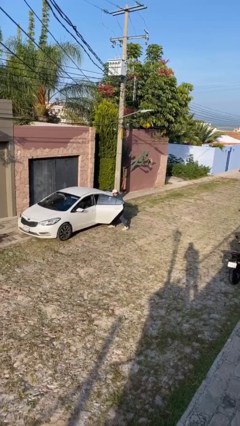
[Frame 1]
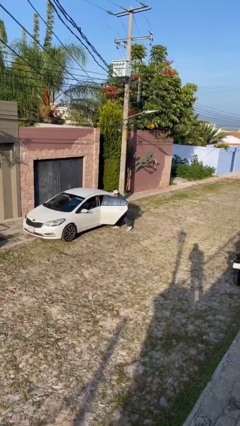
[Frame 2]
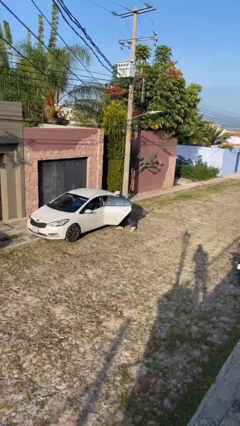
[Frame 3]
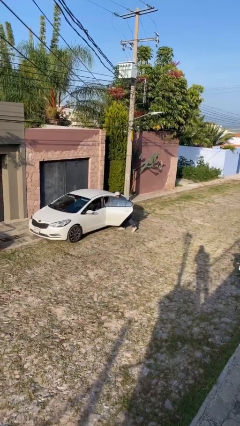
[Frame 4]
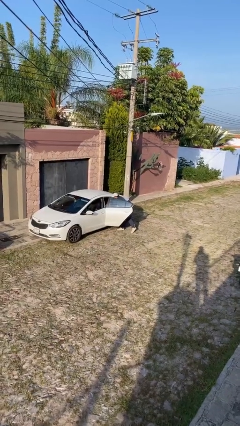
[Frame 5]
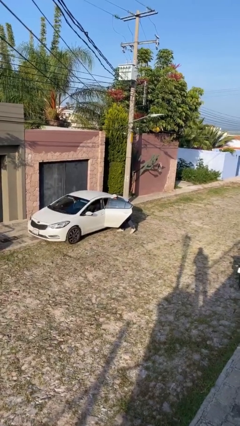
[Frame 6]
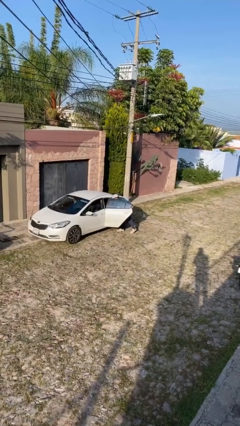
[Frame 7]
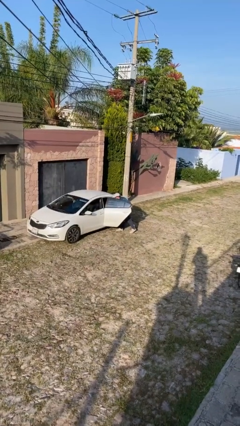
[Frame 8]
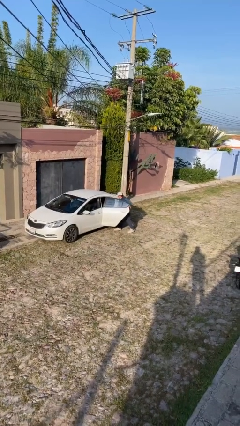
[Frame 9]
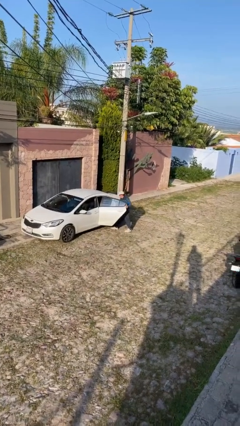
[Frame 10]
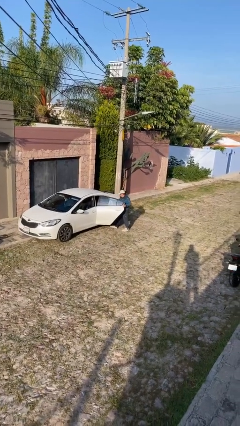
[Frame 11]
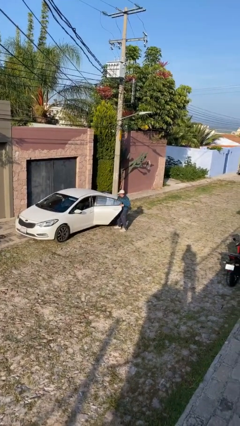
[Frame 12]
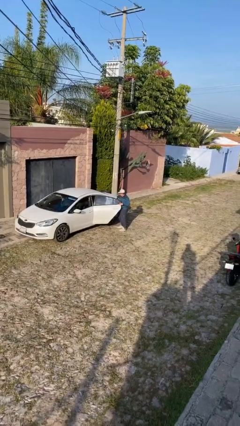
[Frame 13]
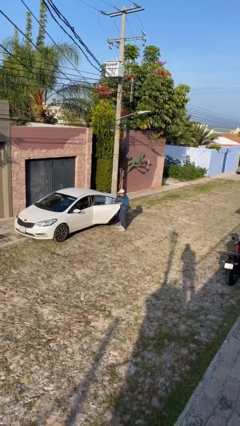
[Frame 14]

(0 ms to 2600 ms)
person loads car

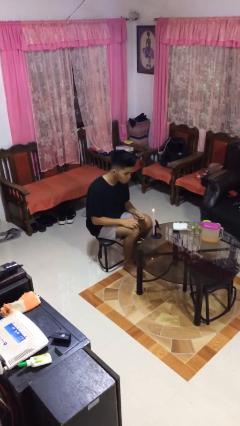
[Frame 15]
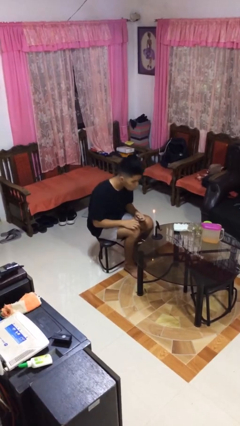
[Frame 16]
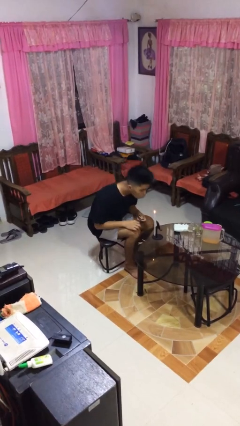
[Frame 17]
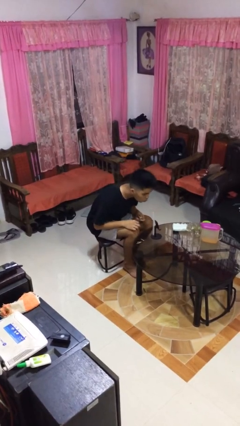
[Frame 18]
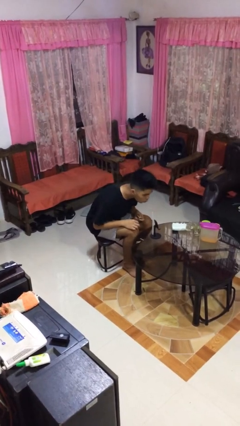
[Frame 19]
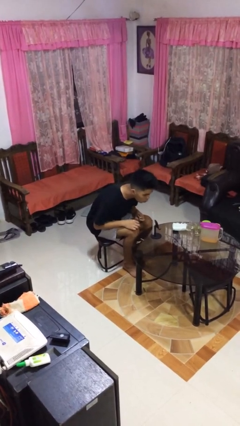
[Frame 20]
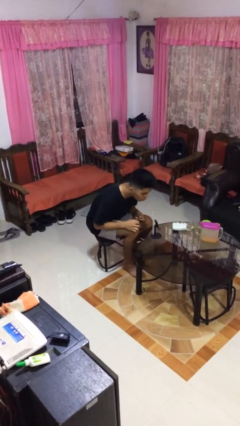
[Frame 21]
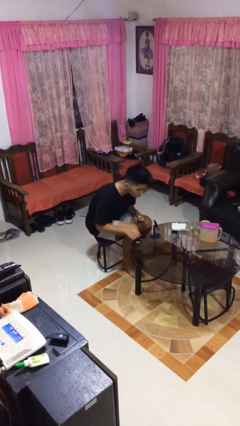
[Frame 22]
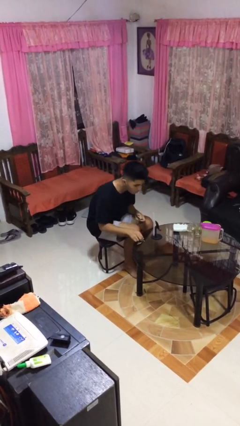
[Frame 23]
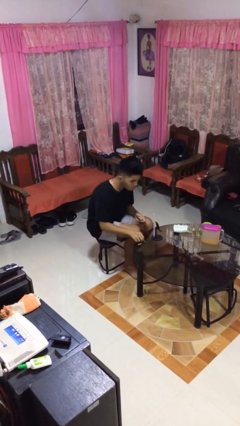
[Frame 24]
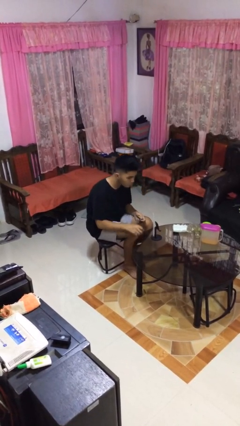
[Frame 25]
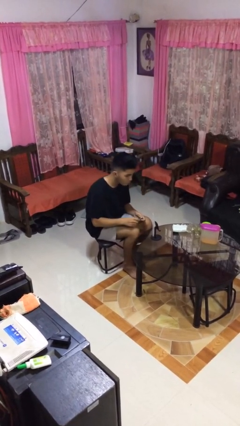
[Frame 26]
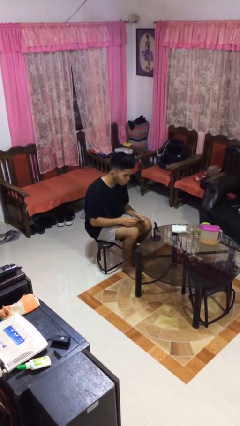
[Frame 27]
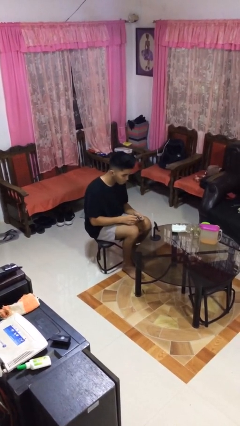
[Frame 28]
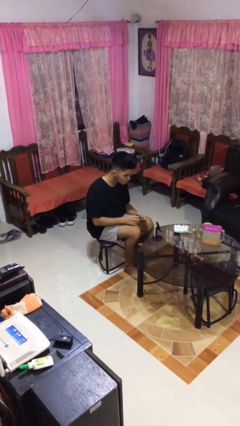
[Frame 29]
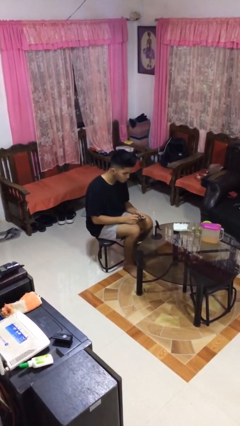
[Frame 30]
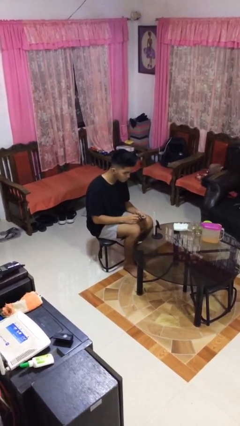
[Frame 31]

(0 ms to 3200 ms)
person extinguishes candle

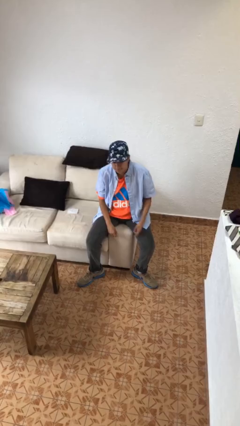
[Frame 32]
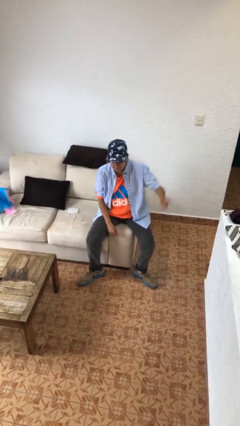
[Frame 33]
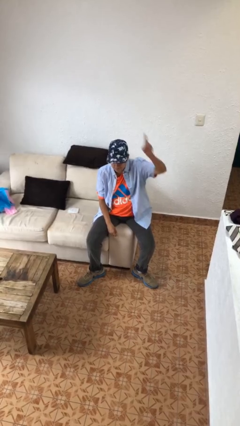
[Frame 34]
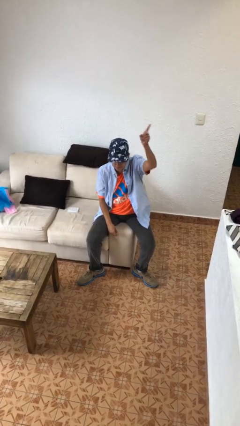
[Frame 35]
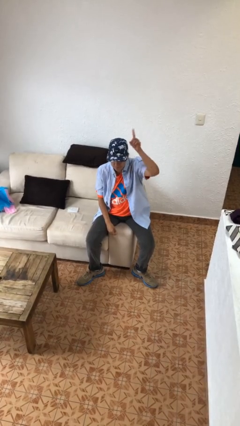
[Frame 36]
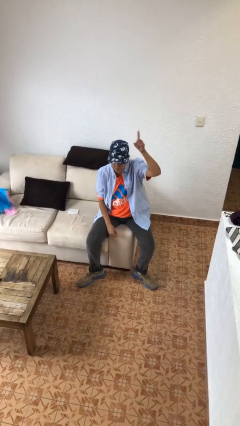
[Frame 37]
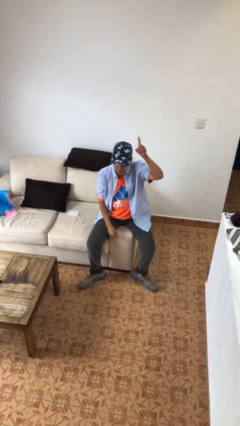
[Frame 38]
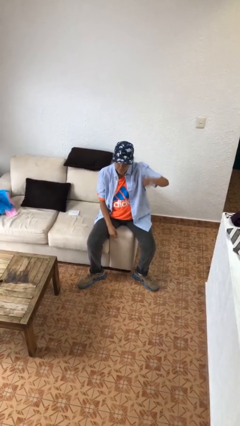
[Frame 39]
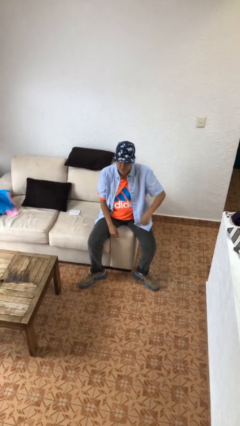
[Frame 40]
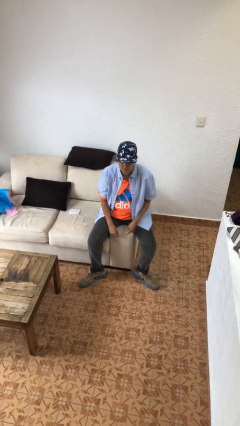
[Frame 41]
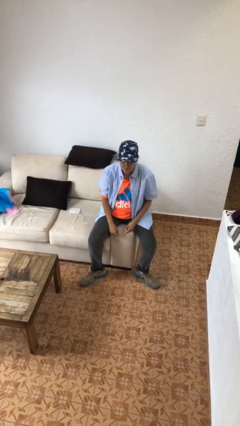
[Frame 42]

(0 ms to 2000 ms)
person gestures number one

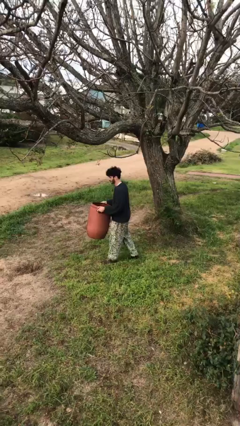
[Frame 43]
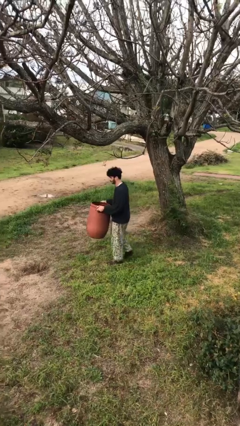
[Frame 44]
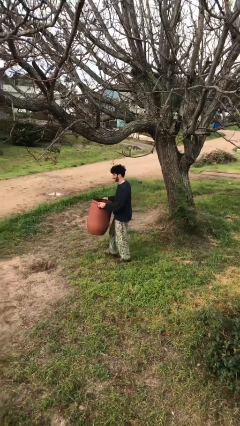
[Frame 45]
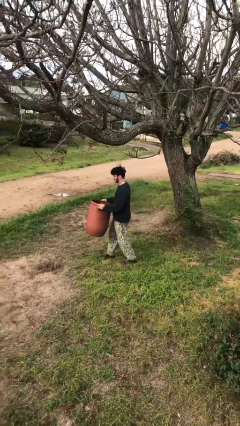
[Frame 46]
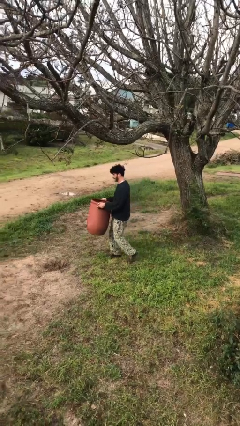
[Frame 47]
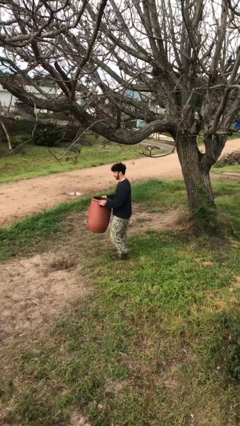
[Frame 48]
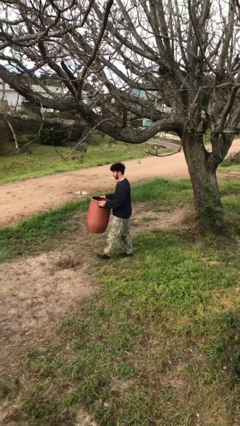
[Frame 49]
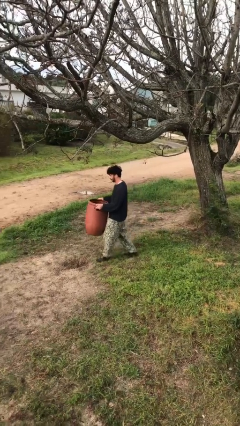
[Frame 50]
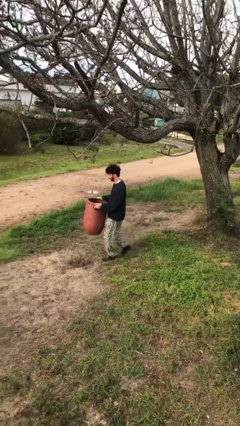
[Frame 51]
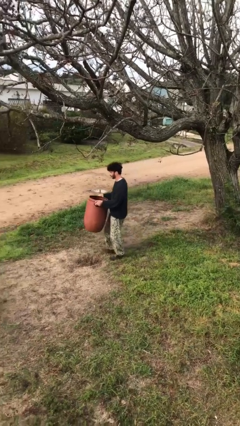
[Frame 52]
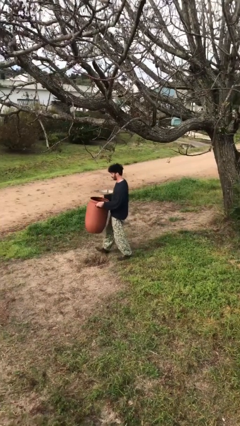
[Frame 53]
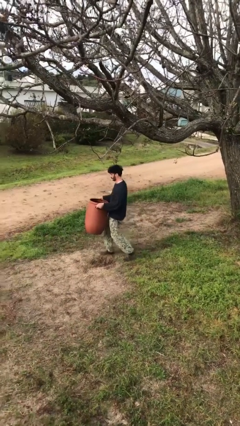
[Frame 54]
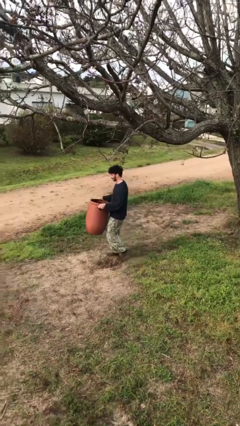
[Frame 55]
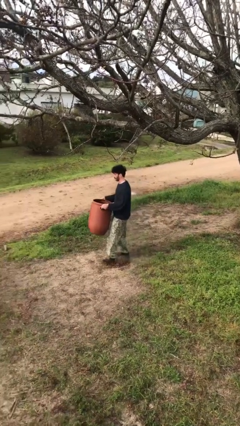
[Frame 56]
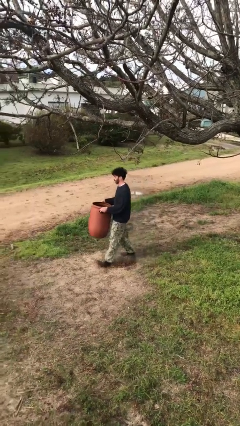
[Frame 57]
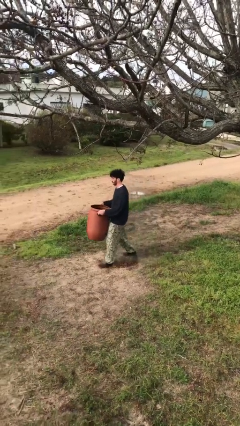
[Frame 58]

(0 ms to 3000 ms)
person carries heavy object

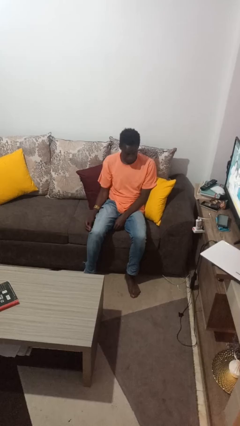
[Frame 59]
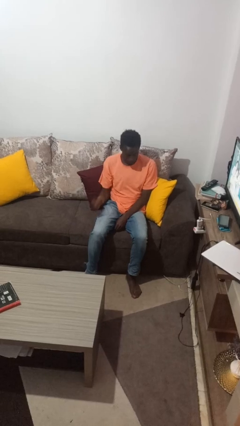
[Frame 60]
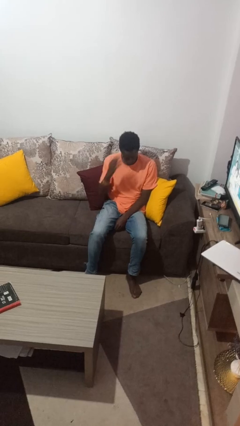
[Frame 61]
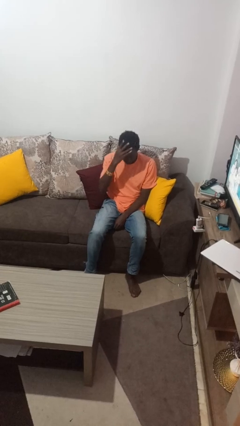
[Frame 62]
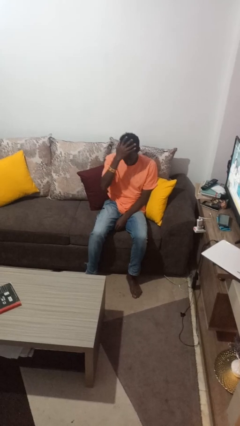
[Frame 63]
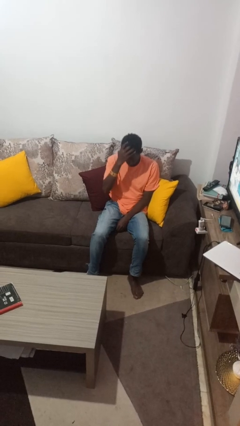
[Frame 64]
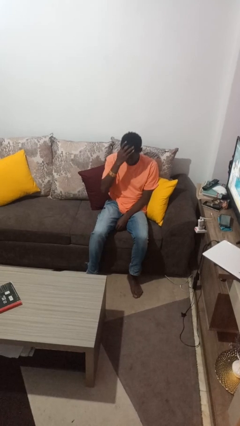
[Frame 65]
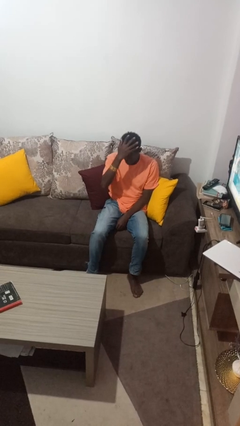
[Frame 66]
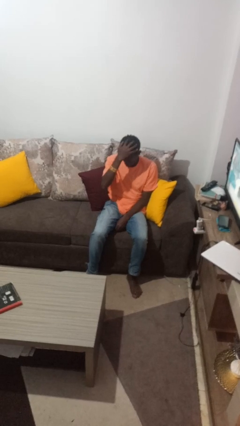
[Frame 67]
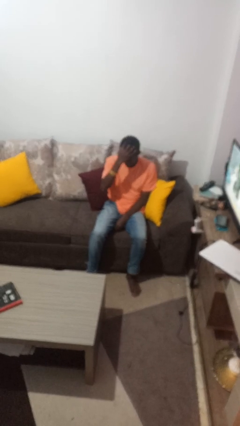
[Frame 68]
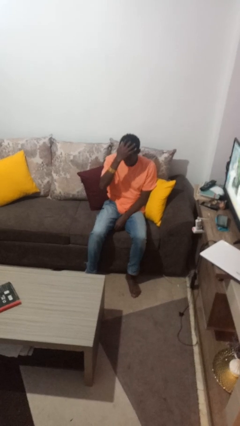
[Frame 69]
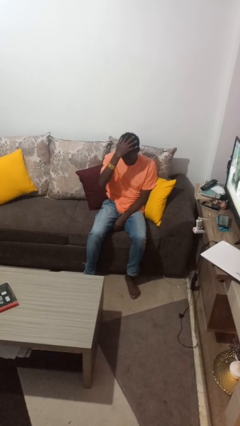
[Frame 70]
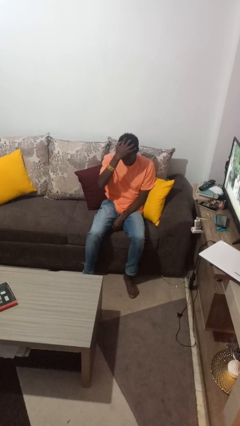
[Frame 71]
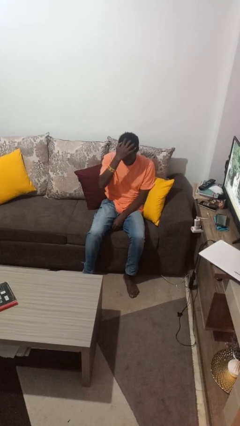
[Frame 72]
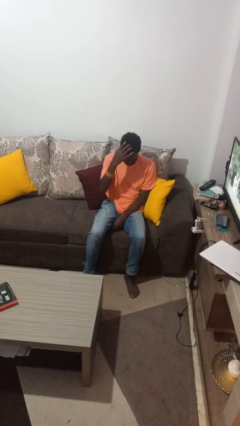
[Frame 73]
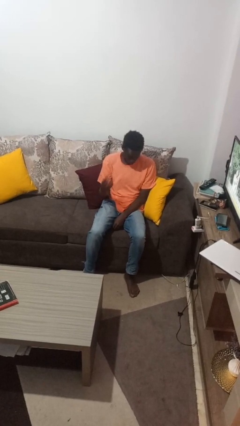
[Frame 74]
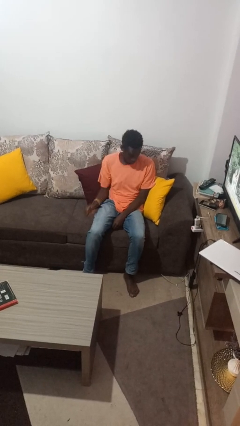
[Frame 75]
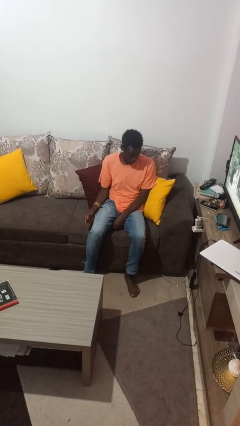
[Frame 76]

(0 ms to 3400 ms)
person strokes hair

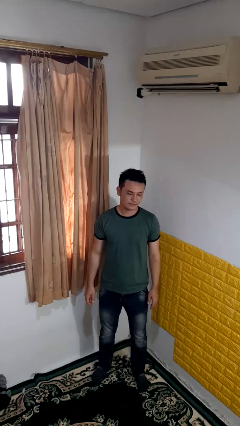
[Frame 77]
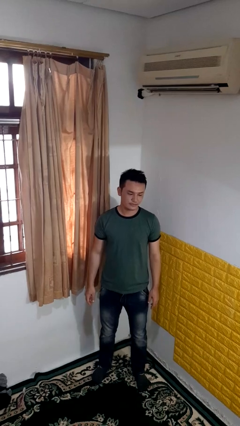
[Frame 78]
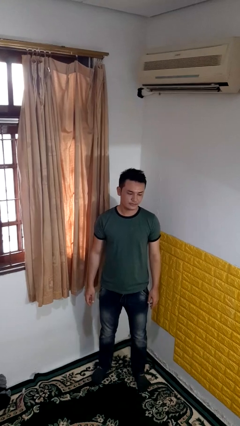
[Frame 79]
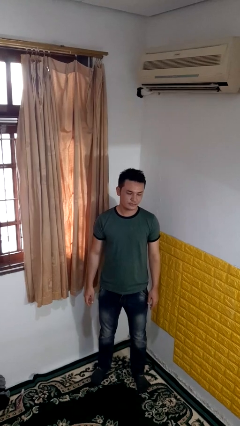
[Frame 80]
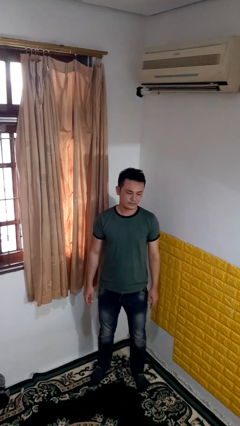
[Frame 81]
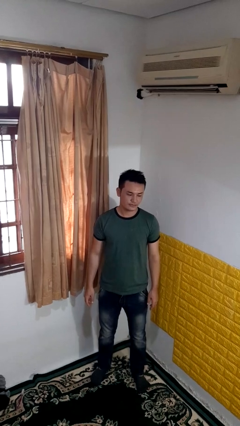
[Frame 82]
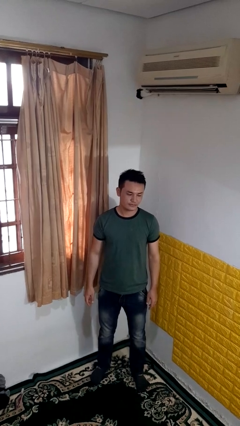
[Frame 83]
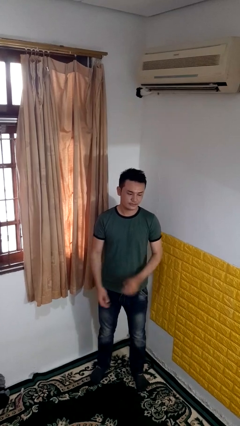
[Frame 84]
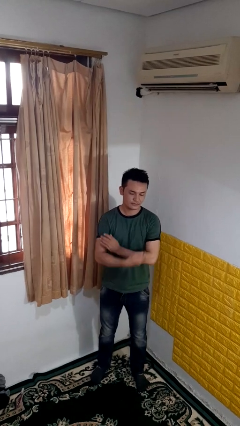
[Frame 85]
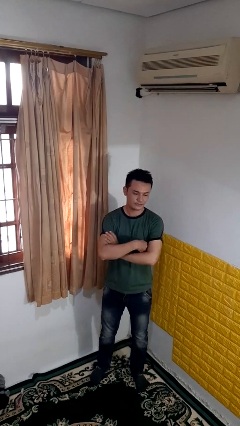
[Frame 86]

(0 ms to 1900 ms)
person crosses arms

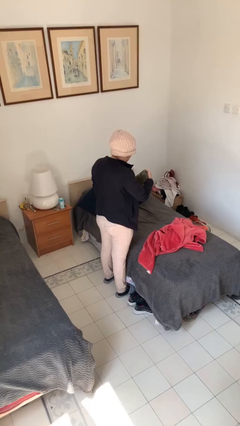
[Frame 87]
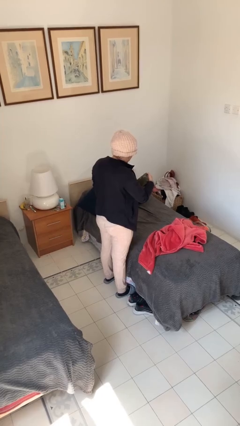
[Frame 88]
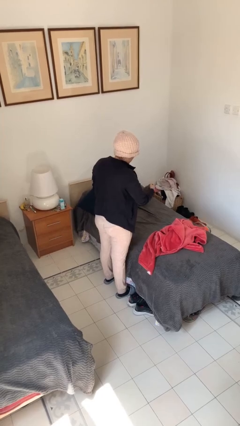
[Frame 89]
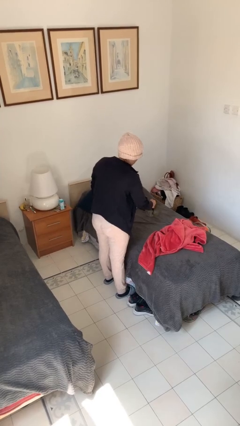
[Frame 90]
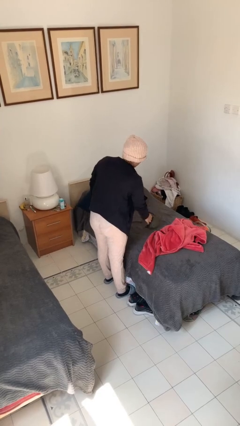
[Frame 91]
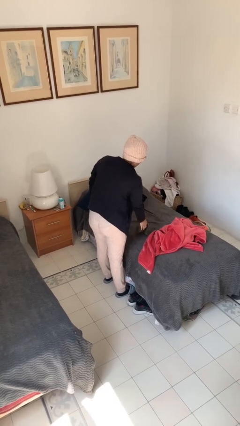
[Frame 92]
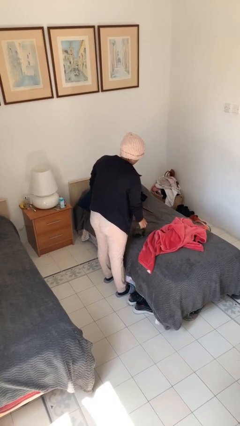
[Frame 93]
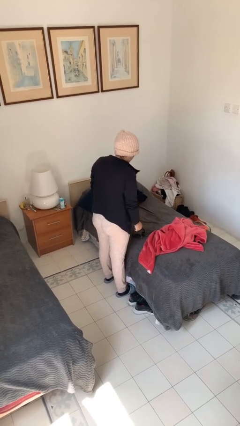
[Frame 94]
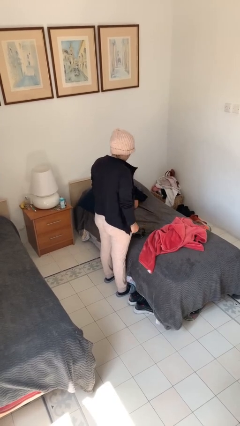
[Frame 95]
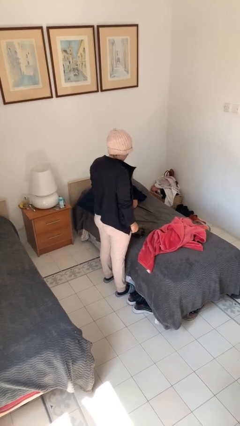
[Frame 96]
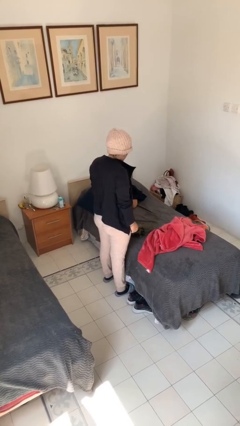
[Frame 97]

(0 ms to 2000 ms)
person puts down object on couch
